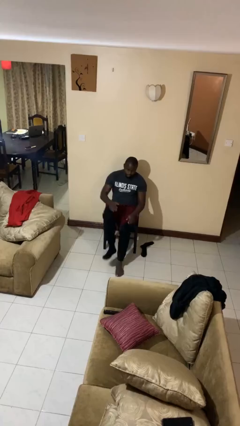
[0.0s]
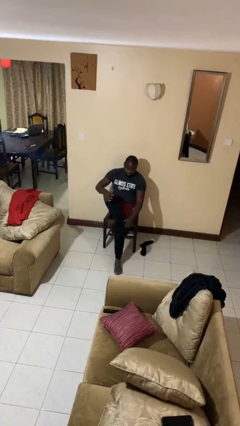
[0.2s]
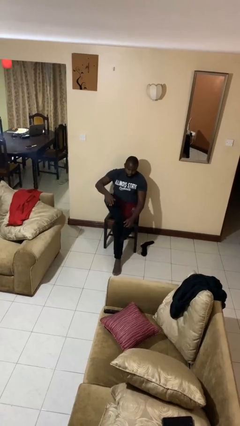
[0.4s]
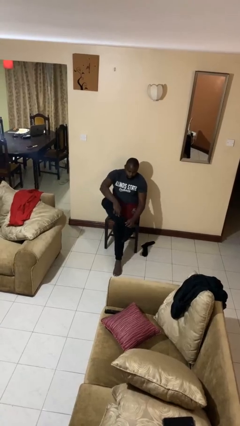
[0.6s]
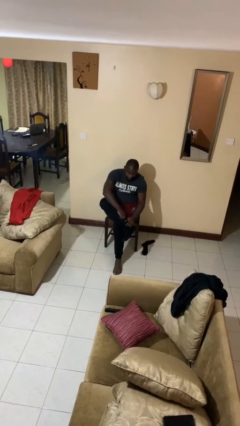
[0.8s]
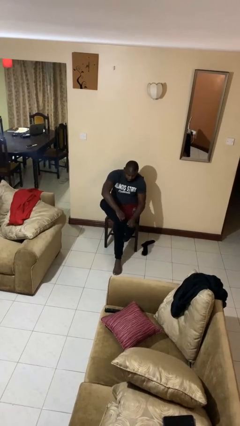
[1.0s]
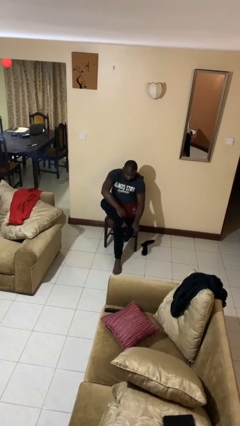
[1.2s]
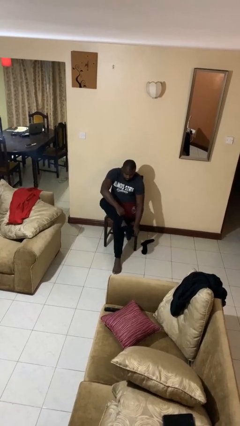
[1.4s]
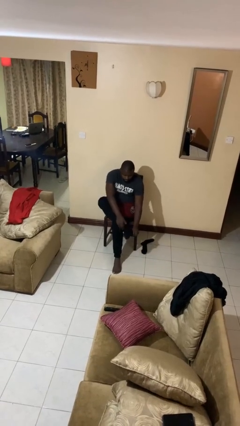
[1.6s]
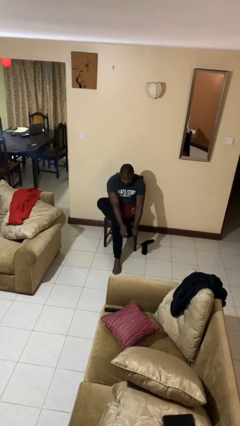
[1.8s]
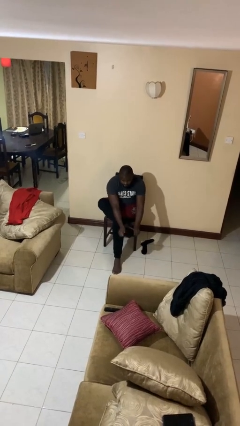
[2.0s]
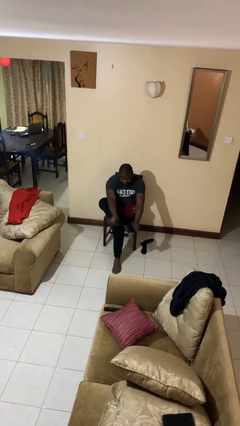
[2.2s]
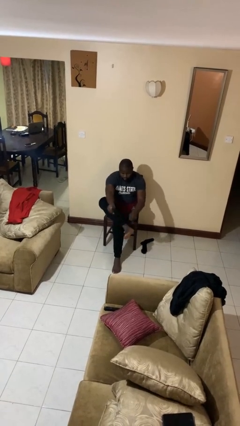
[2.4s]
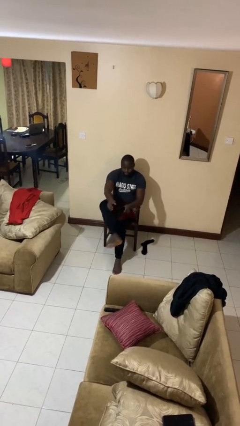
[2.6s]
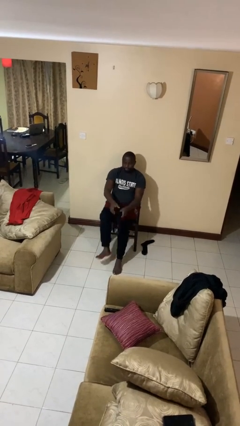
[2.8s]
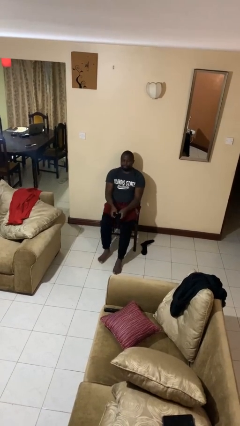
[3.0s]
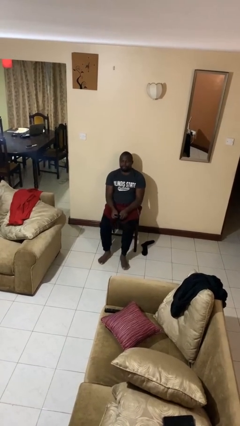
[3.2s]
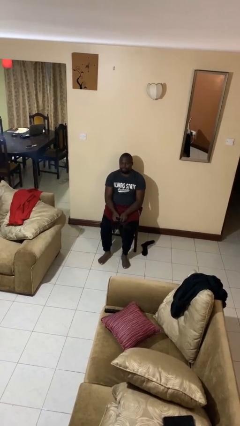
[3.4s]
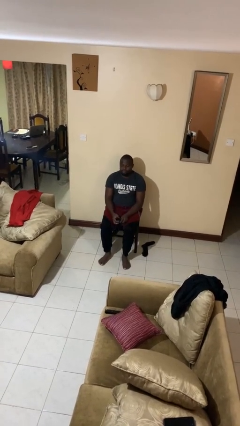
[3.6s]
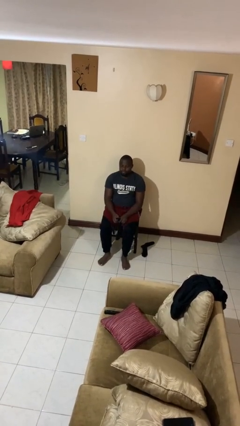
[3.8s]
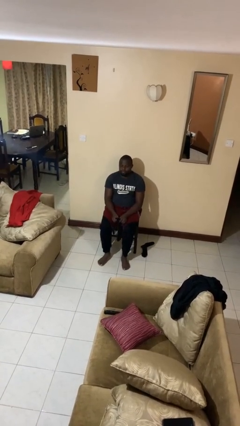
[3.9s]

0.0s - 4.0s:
person takes off socks

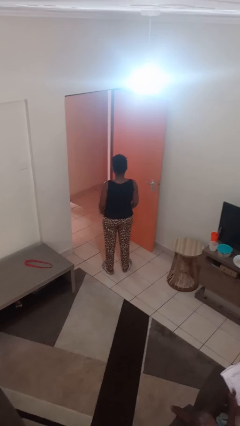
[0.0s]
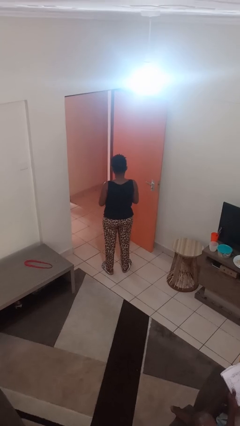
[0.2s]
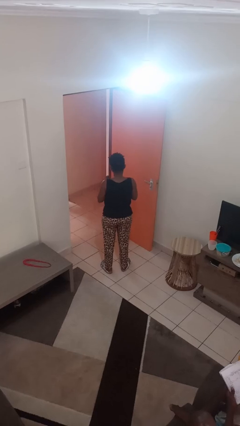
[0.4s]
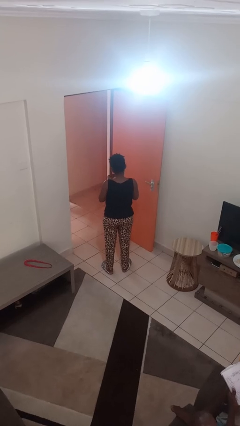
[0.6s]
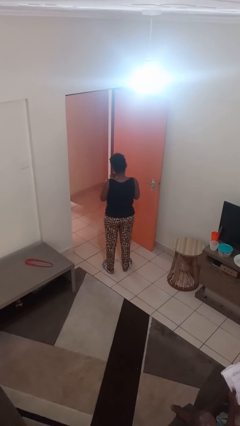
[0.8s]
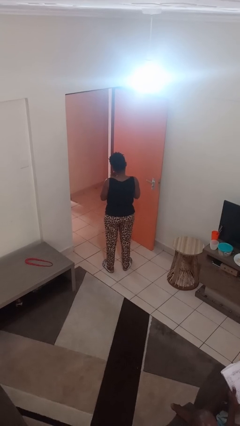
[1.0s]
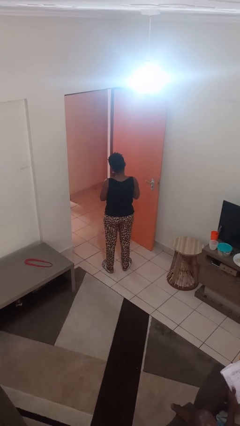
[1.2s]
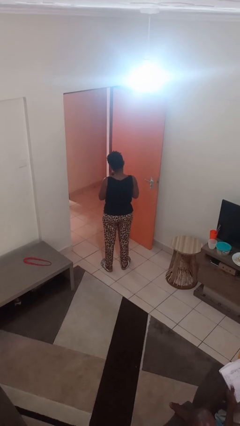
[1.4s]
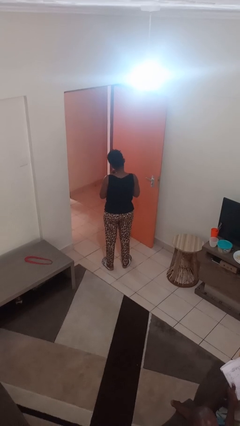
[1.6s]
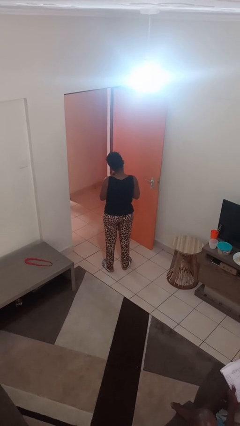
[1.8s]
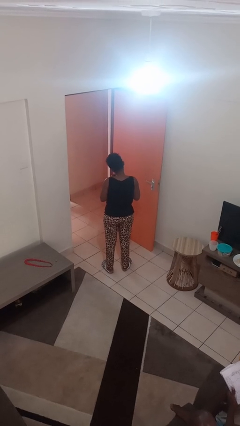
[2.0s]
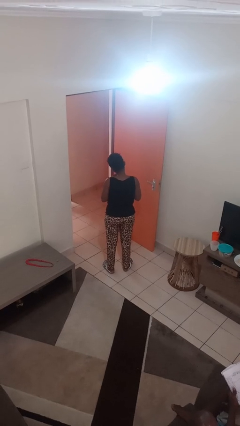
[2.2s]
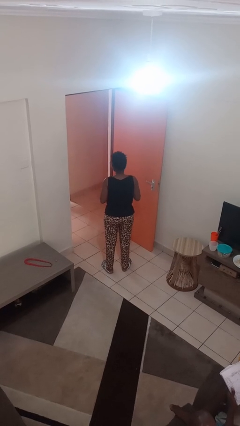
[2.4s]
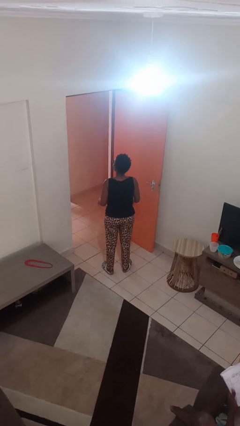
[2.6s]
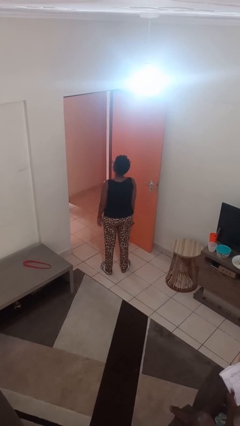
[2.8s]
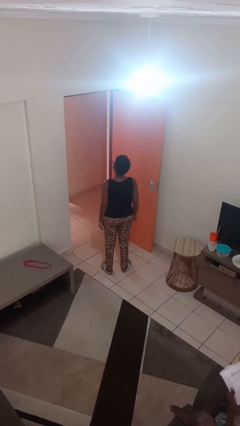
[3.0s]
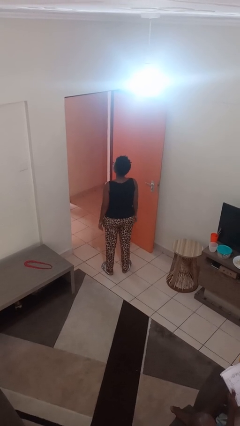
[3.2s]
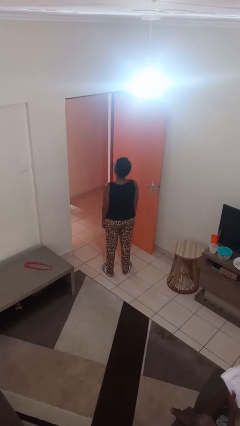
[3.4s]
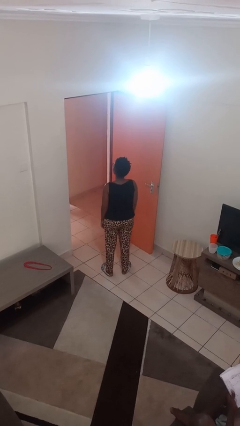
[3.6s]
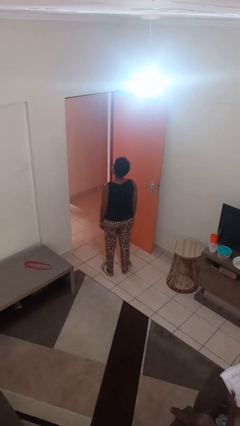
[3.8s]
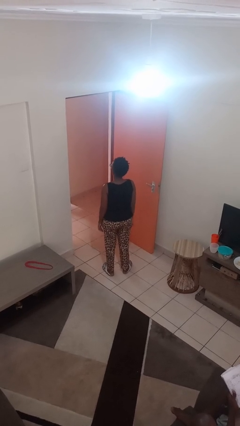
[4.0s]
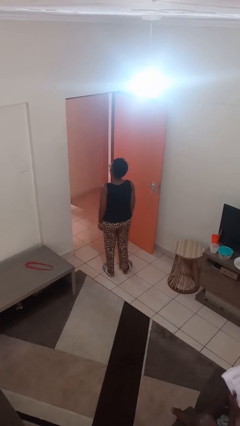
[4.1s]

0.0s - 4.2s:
person puts on ring

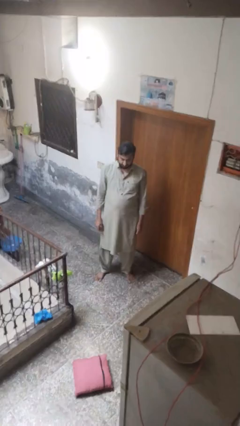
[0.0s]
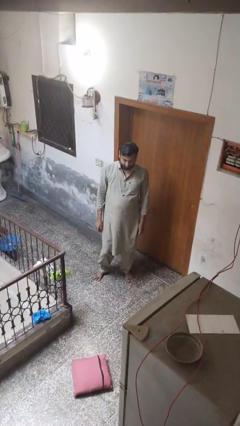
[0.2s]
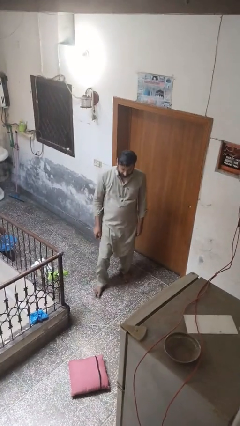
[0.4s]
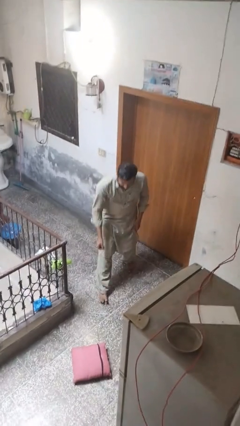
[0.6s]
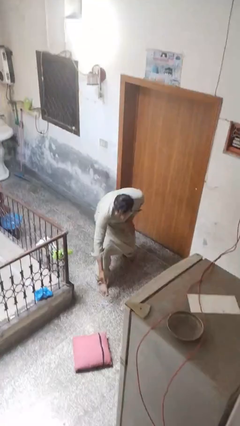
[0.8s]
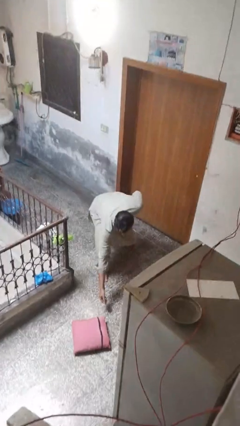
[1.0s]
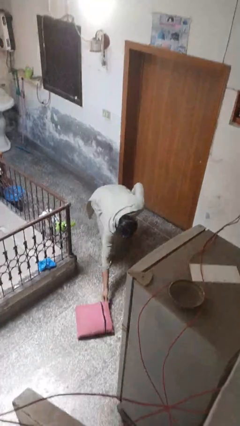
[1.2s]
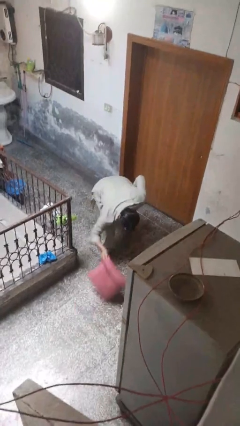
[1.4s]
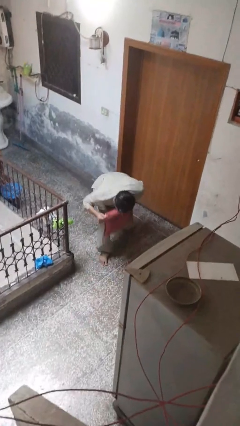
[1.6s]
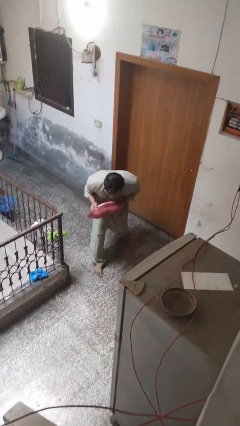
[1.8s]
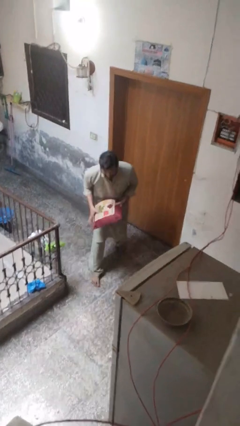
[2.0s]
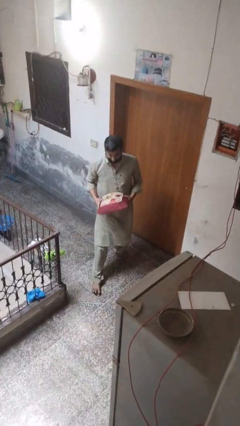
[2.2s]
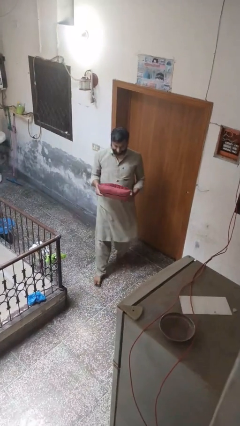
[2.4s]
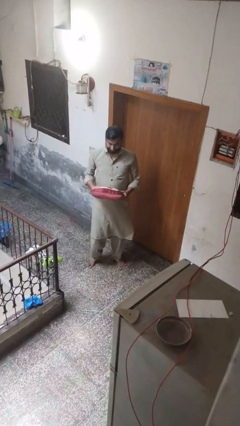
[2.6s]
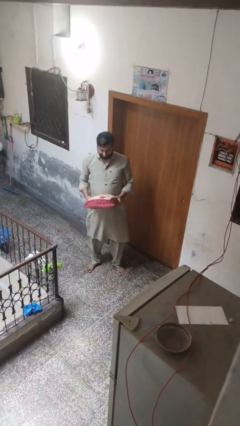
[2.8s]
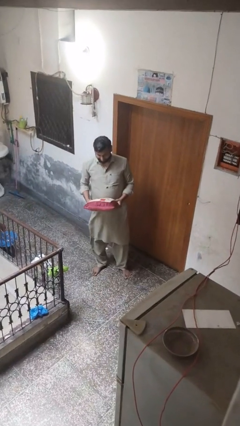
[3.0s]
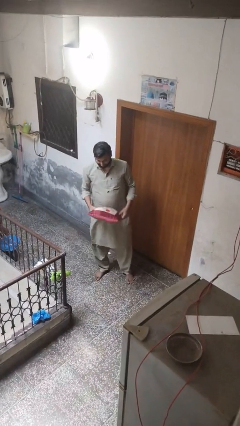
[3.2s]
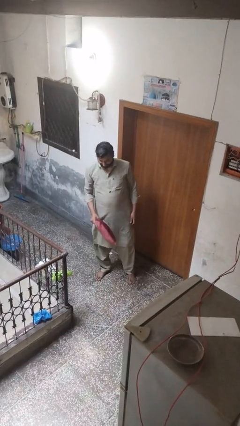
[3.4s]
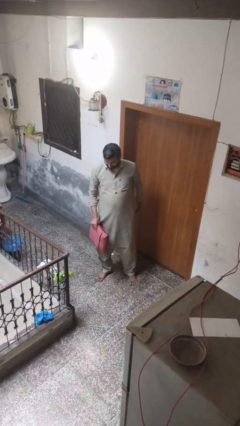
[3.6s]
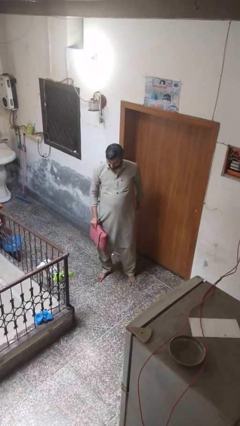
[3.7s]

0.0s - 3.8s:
person picks up object from floor

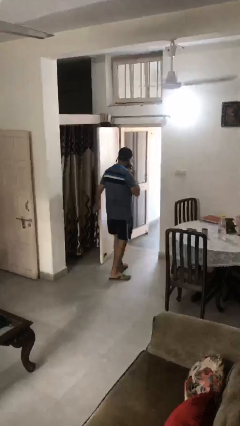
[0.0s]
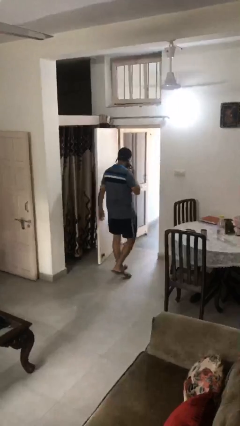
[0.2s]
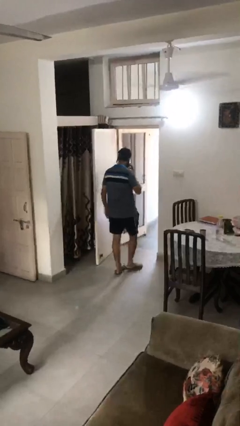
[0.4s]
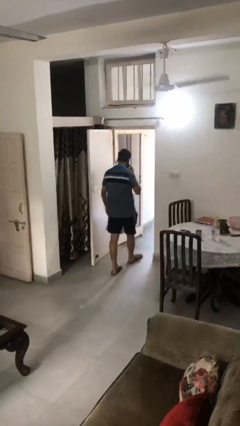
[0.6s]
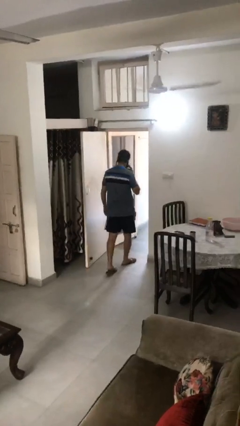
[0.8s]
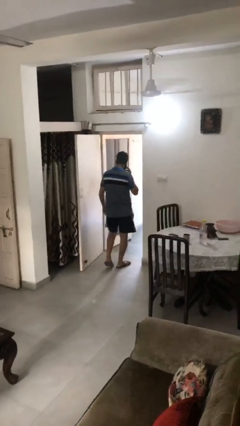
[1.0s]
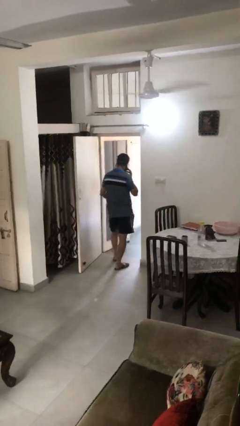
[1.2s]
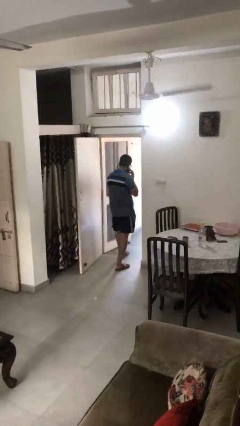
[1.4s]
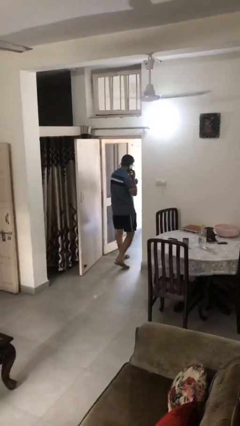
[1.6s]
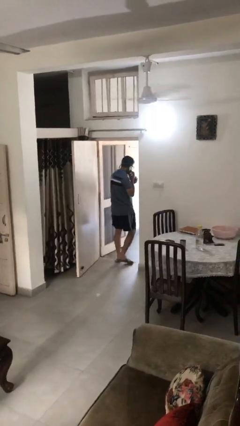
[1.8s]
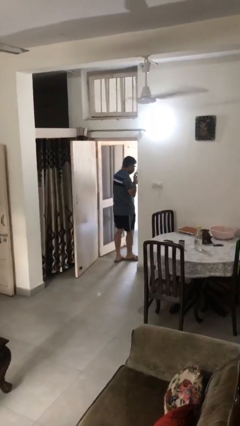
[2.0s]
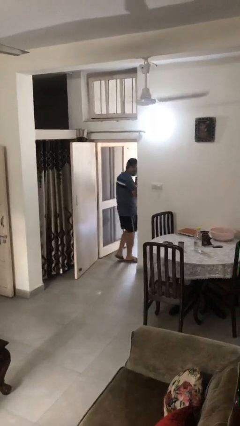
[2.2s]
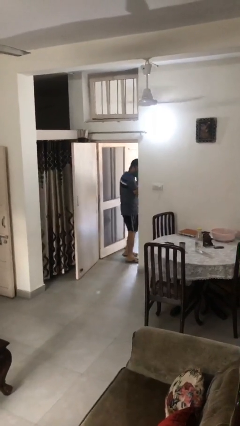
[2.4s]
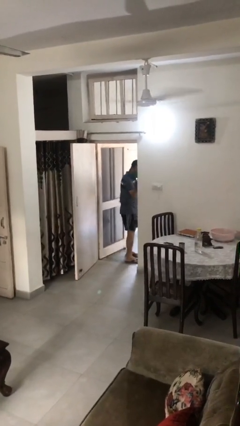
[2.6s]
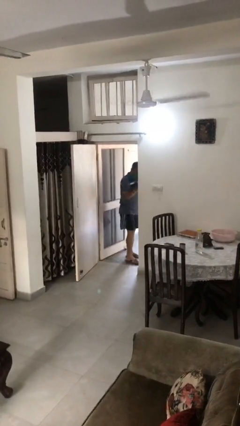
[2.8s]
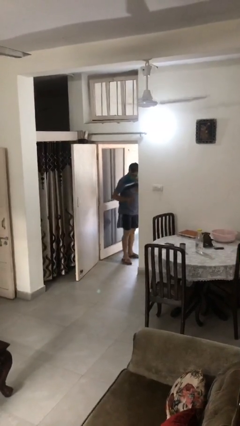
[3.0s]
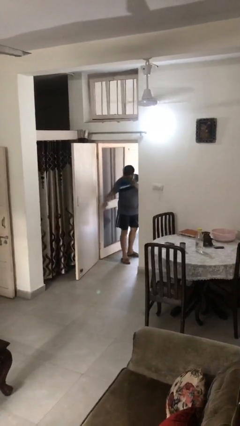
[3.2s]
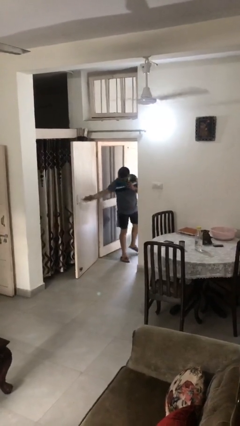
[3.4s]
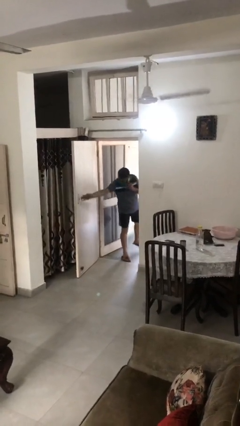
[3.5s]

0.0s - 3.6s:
person exits scene through structure

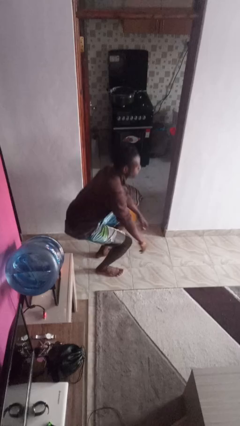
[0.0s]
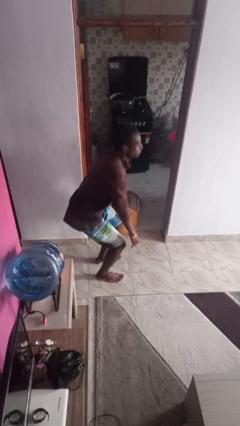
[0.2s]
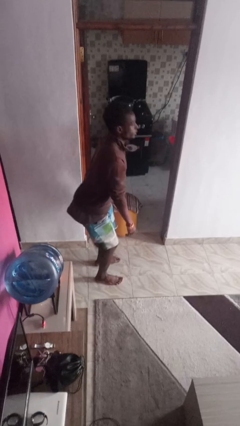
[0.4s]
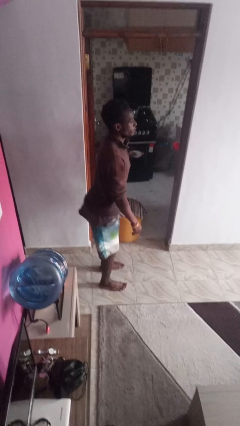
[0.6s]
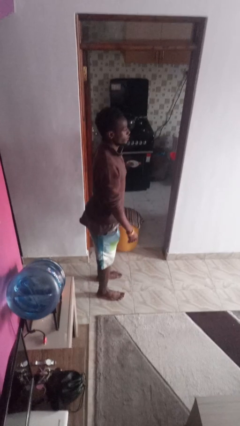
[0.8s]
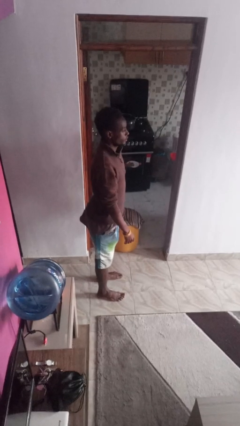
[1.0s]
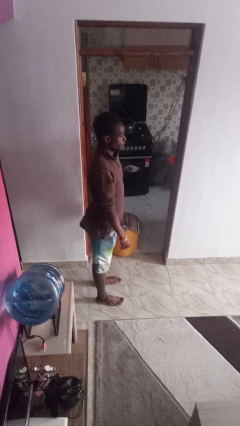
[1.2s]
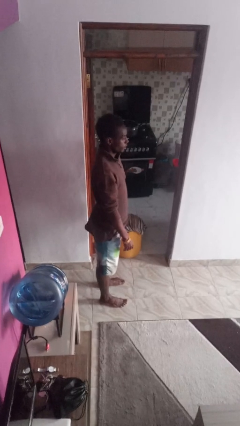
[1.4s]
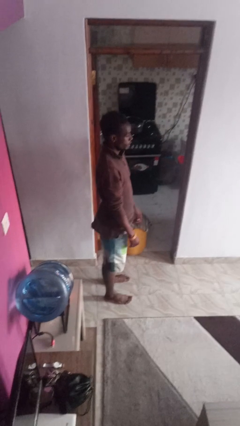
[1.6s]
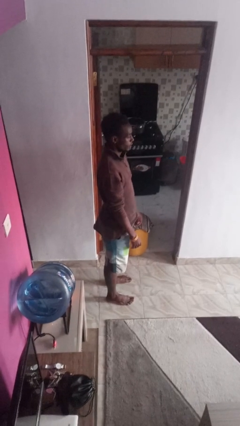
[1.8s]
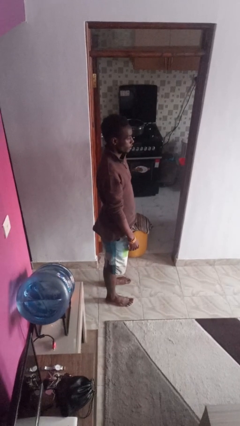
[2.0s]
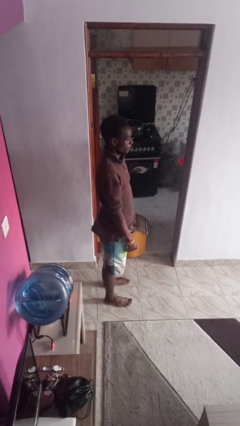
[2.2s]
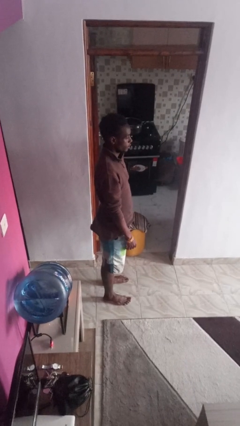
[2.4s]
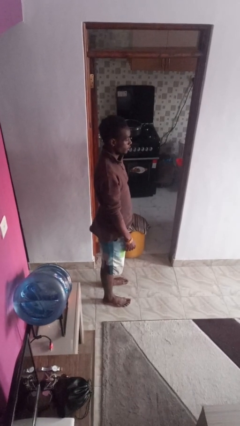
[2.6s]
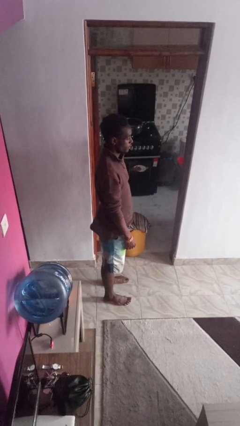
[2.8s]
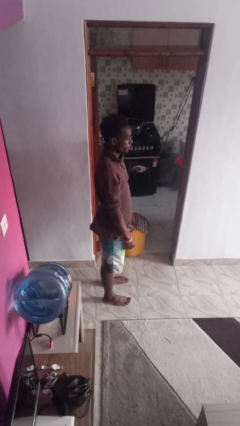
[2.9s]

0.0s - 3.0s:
person stands up
